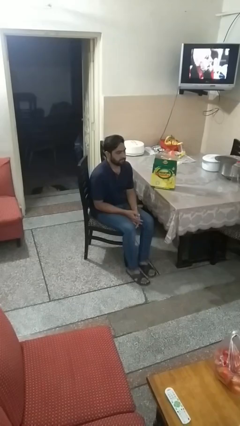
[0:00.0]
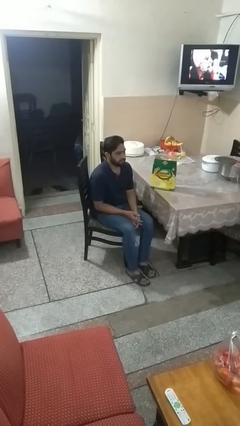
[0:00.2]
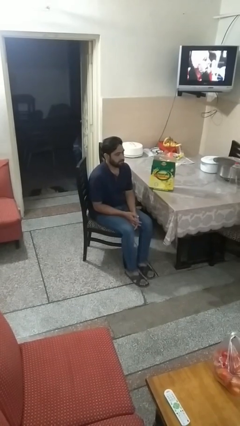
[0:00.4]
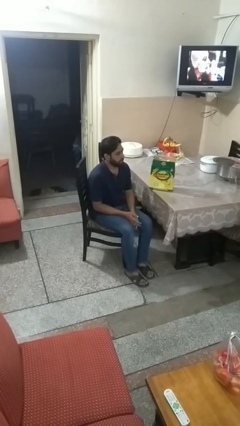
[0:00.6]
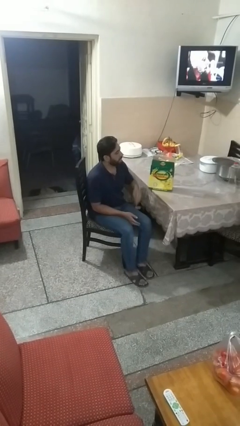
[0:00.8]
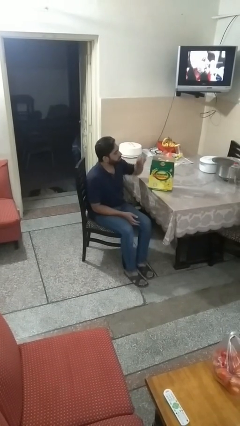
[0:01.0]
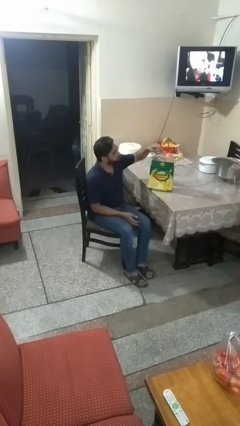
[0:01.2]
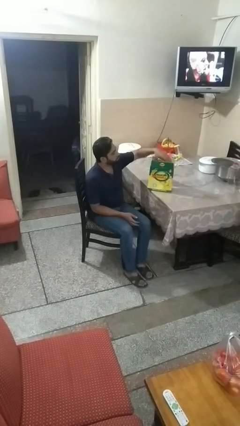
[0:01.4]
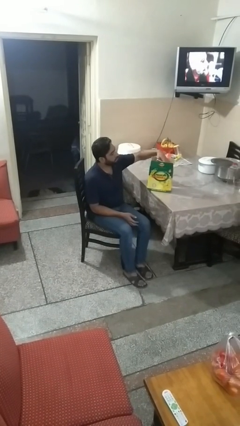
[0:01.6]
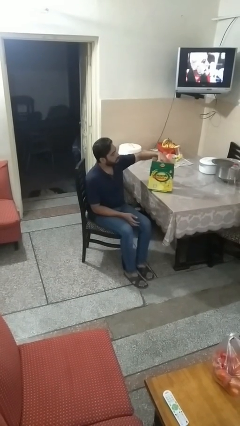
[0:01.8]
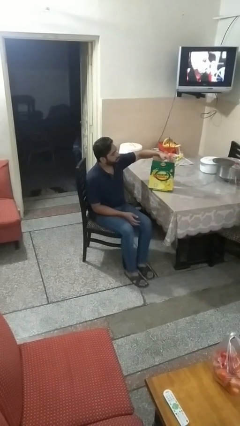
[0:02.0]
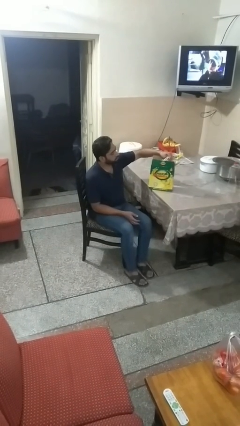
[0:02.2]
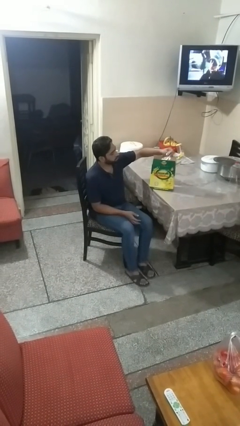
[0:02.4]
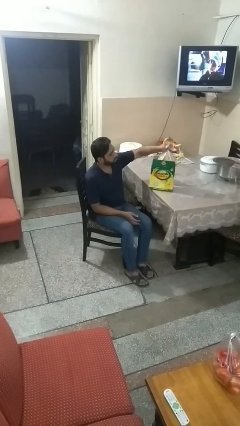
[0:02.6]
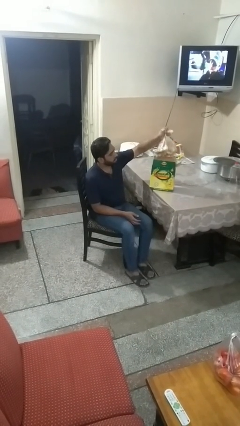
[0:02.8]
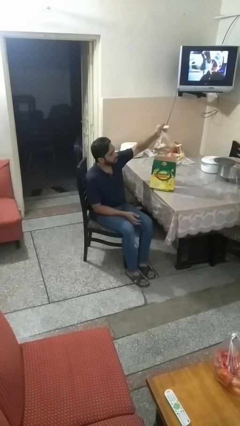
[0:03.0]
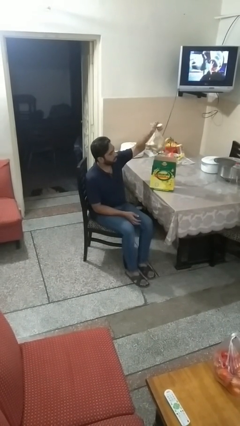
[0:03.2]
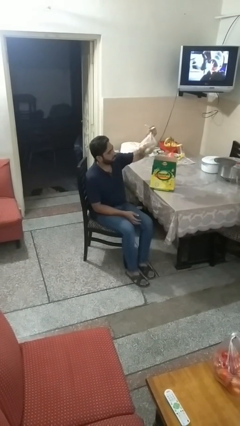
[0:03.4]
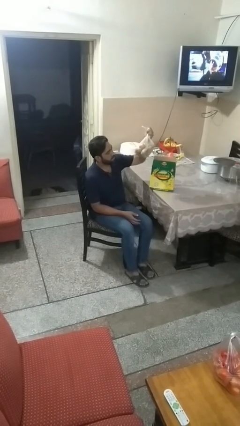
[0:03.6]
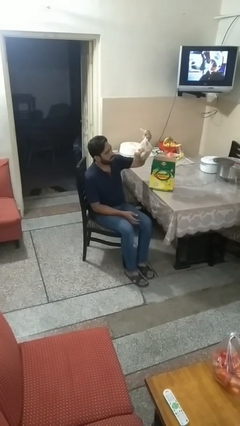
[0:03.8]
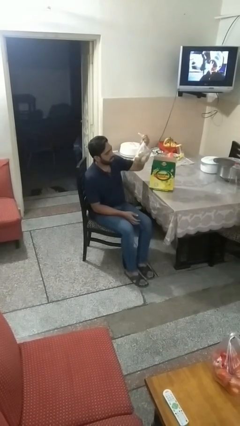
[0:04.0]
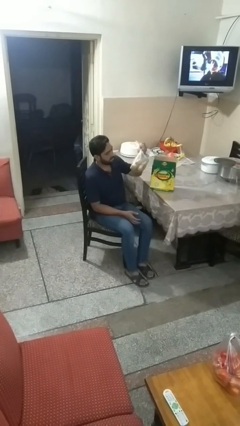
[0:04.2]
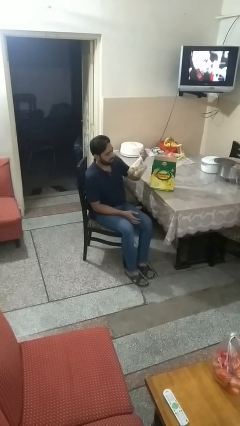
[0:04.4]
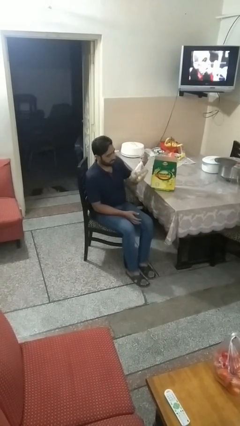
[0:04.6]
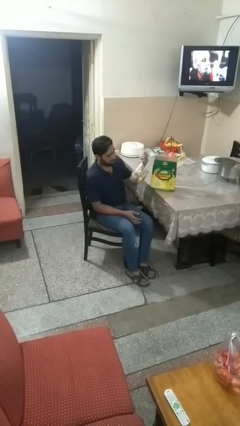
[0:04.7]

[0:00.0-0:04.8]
person takes object from box

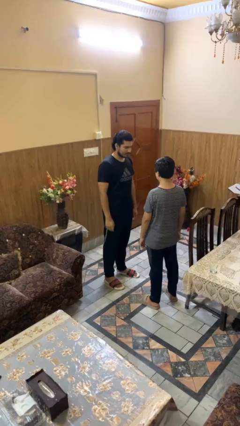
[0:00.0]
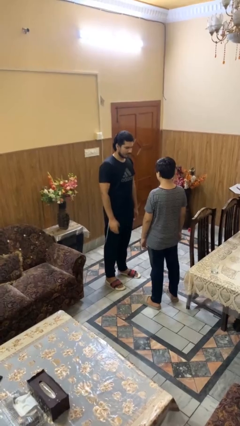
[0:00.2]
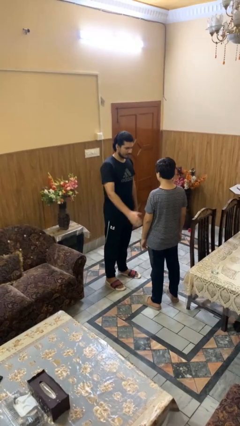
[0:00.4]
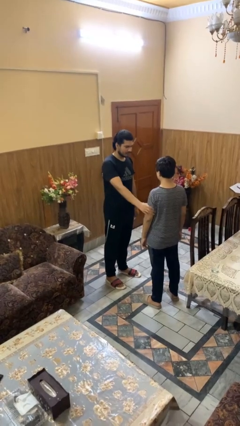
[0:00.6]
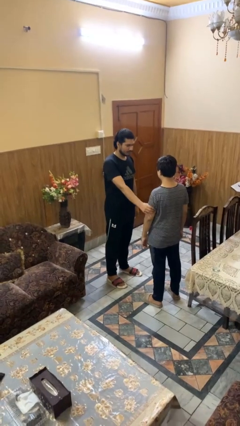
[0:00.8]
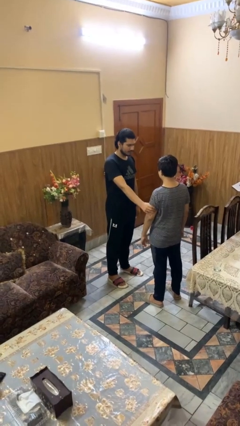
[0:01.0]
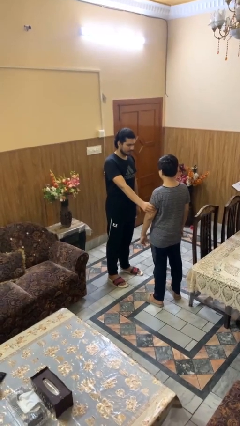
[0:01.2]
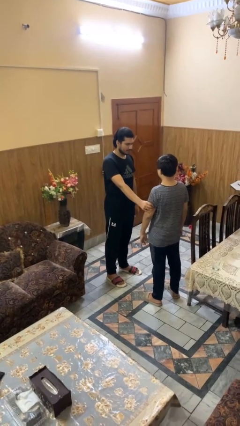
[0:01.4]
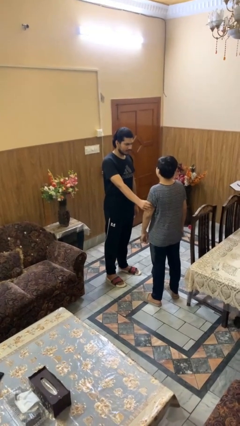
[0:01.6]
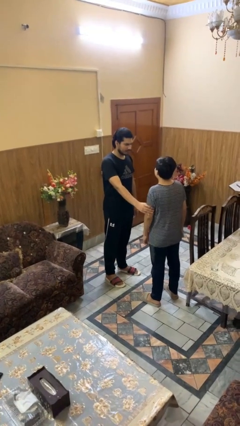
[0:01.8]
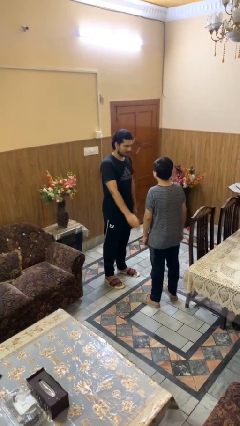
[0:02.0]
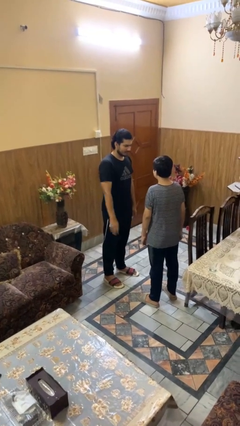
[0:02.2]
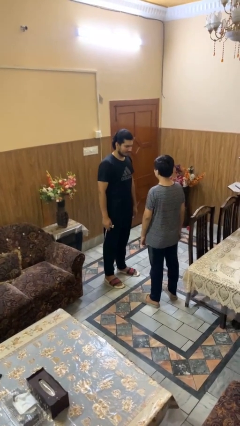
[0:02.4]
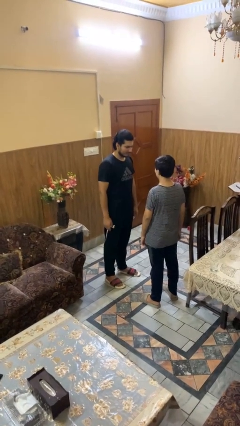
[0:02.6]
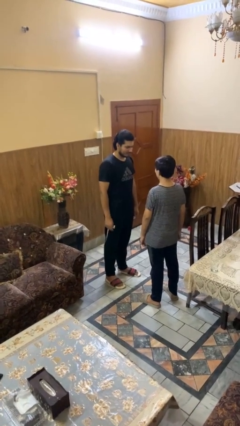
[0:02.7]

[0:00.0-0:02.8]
person grabs person by bicep

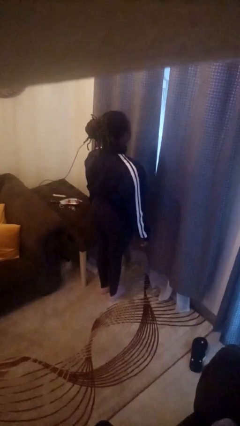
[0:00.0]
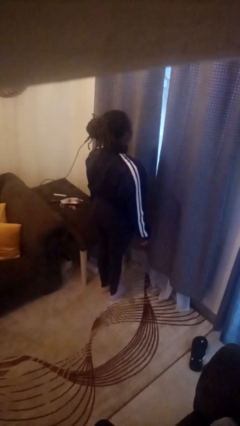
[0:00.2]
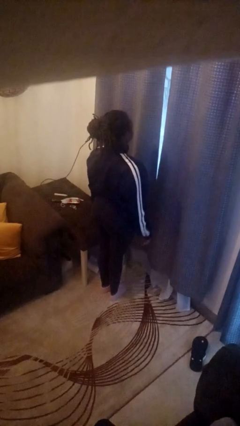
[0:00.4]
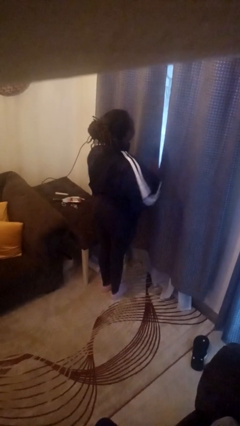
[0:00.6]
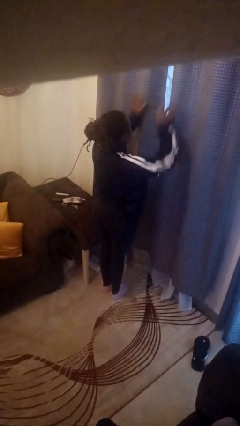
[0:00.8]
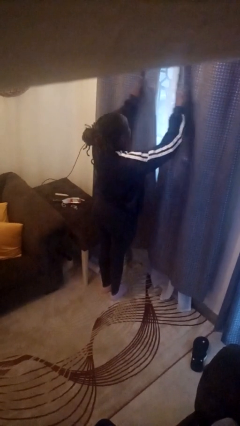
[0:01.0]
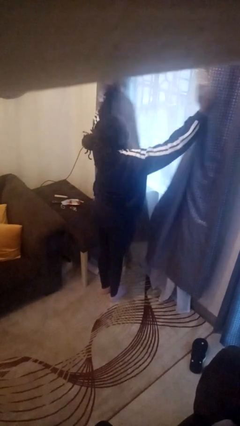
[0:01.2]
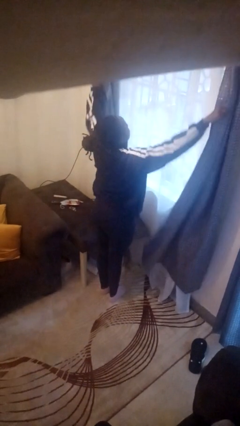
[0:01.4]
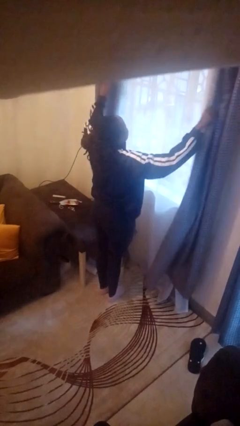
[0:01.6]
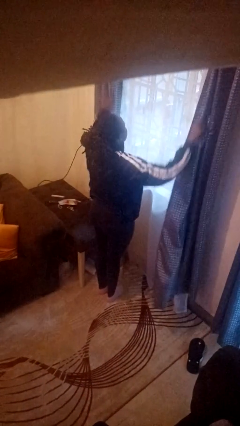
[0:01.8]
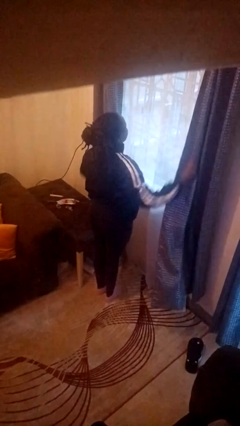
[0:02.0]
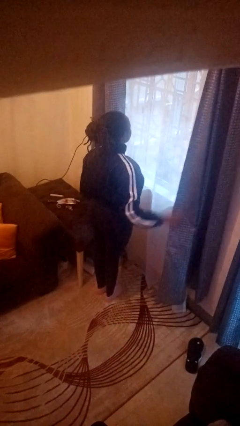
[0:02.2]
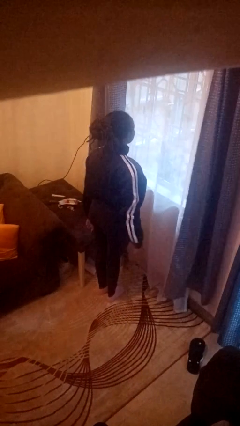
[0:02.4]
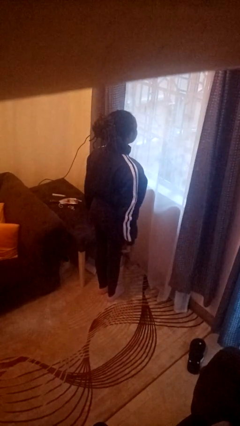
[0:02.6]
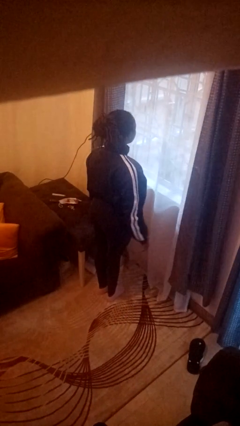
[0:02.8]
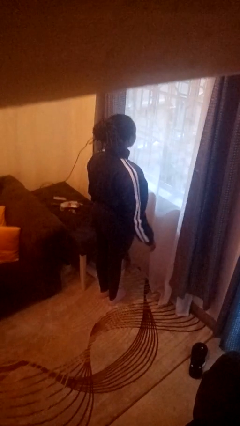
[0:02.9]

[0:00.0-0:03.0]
person opens curtains

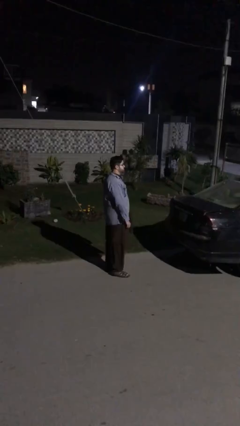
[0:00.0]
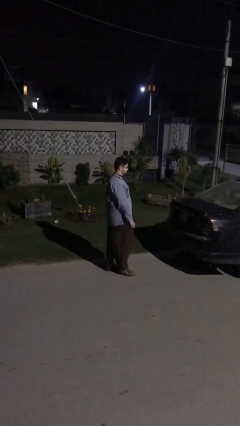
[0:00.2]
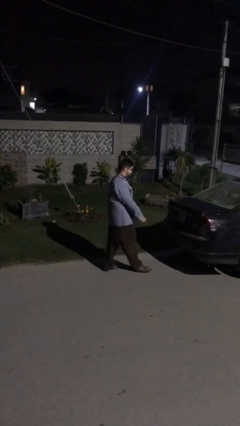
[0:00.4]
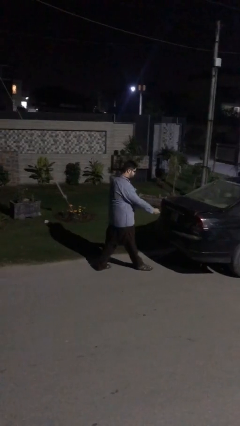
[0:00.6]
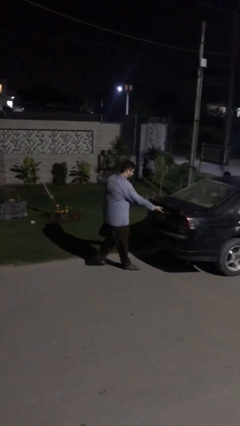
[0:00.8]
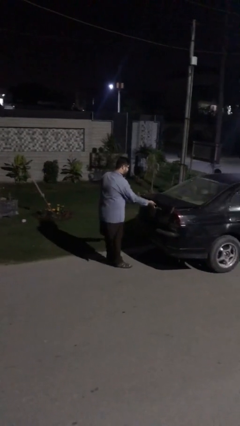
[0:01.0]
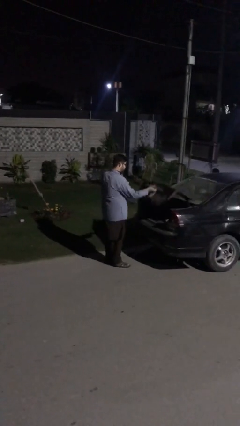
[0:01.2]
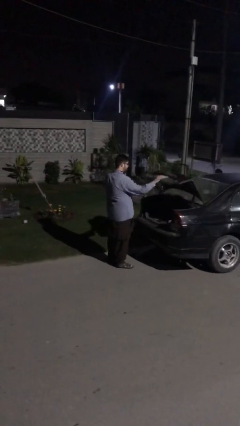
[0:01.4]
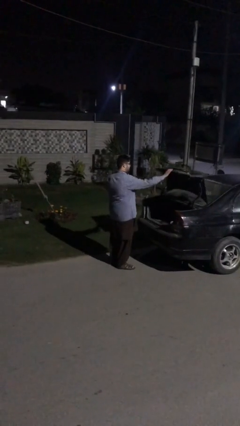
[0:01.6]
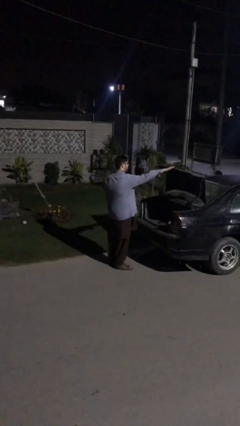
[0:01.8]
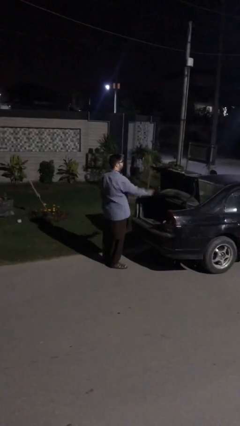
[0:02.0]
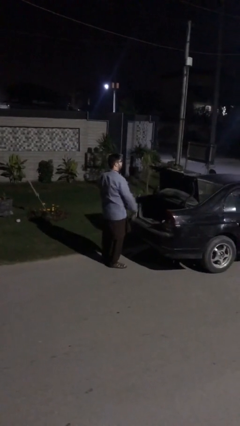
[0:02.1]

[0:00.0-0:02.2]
person opens car trunk

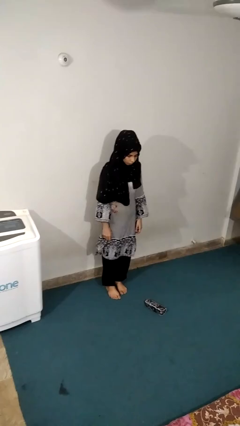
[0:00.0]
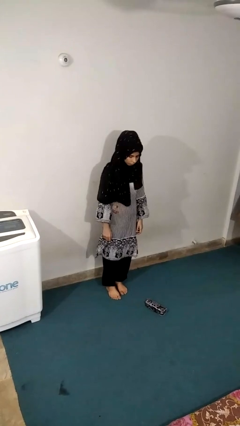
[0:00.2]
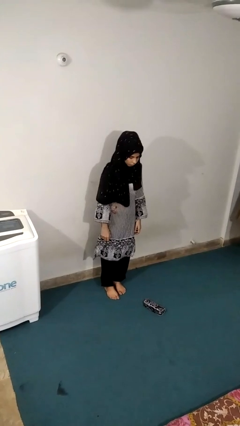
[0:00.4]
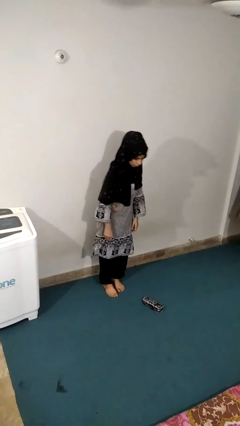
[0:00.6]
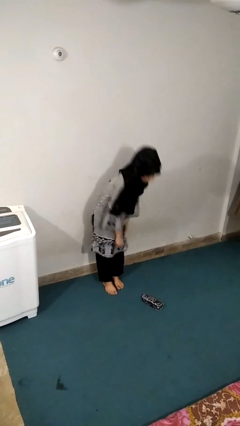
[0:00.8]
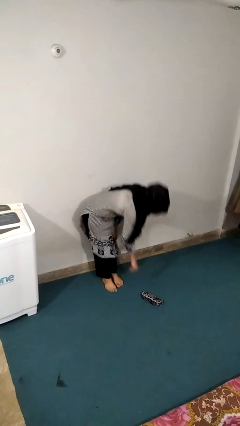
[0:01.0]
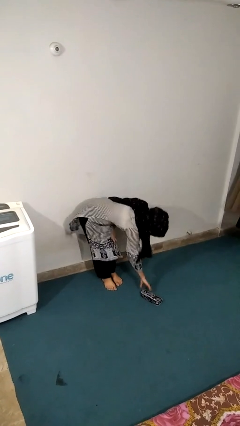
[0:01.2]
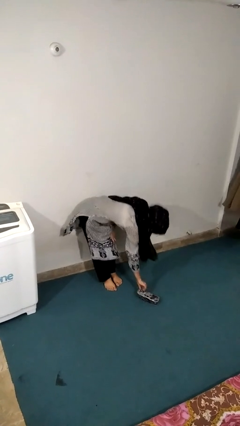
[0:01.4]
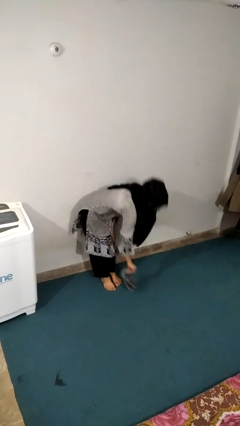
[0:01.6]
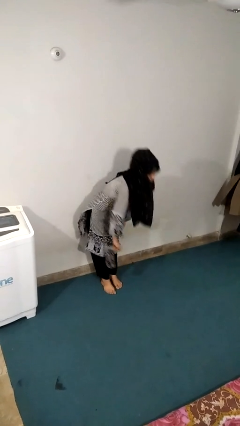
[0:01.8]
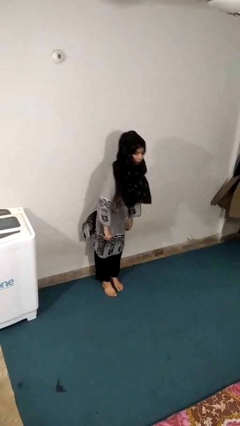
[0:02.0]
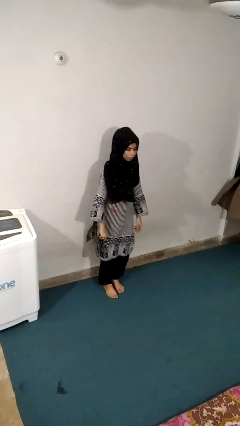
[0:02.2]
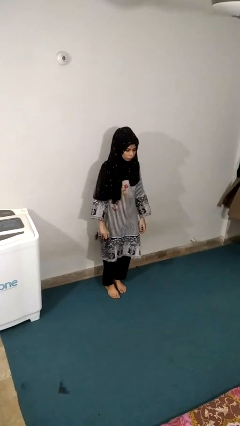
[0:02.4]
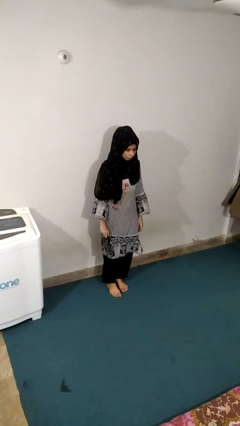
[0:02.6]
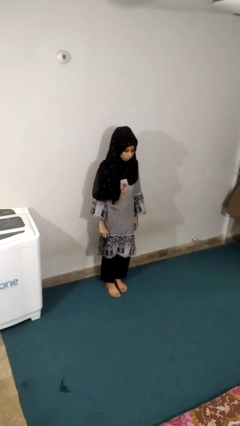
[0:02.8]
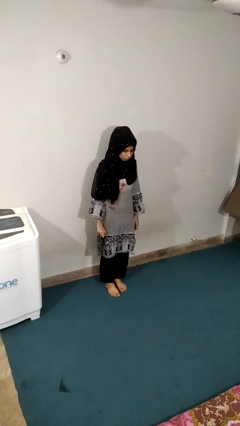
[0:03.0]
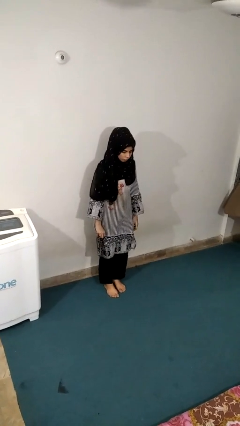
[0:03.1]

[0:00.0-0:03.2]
person picks up object from floor

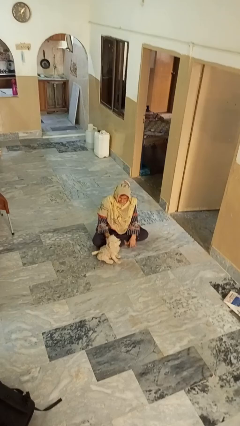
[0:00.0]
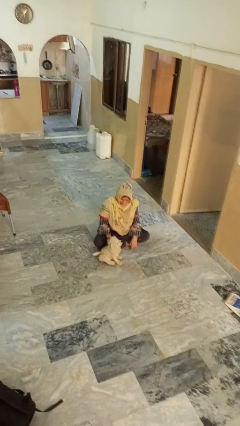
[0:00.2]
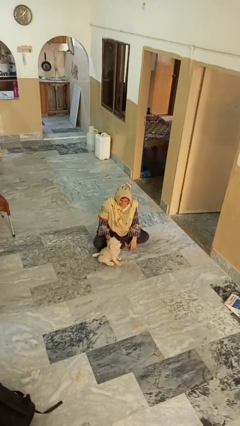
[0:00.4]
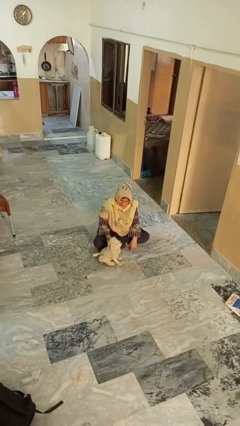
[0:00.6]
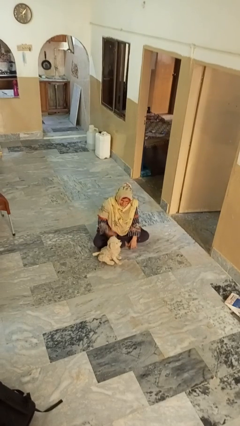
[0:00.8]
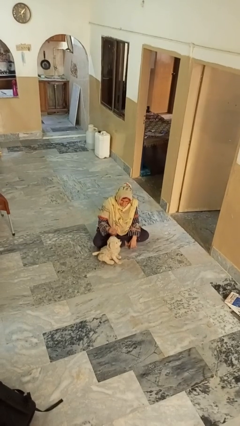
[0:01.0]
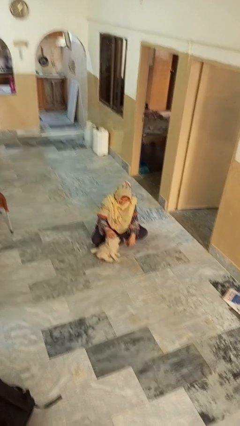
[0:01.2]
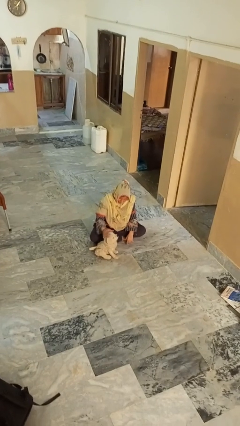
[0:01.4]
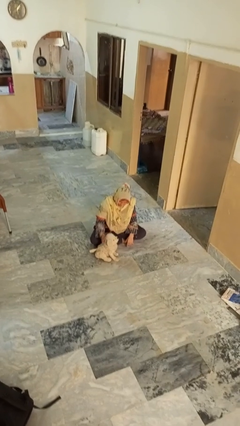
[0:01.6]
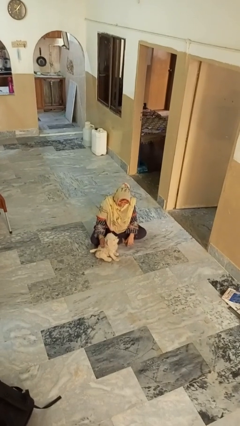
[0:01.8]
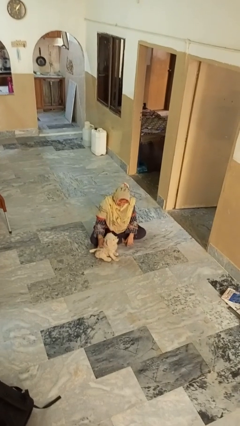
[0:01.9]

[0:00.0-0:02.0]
person pets dog
